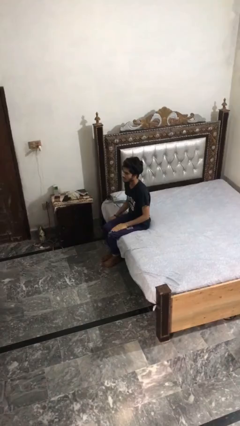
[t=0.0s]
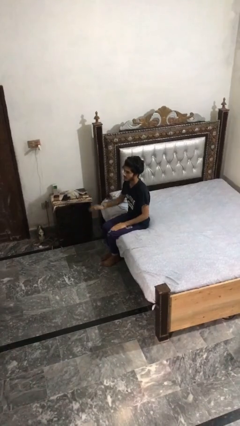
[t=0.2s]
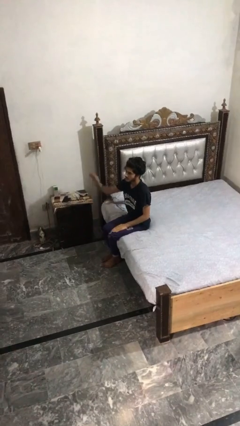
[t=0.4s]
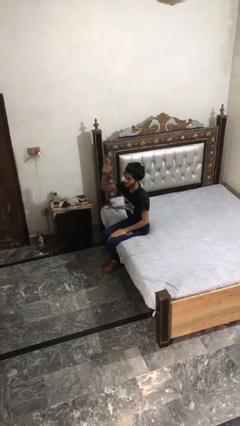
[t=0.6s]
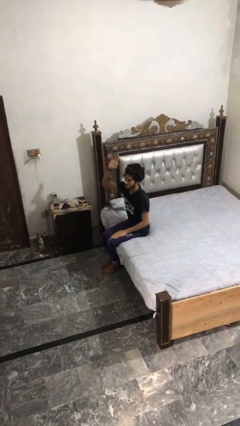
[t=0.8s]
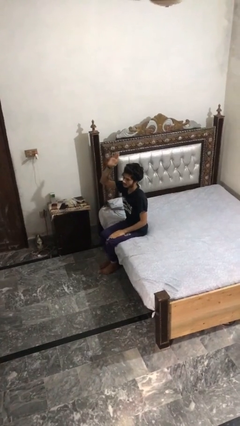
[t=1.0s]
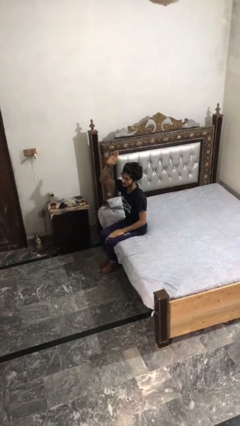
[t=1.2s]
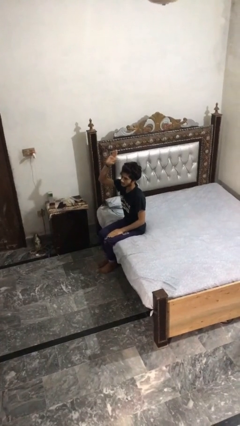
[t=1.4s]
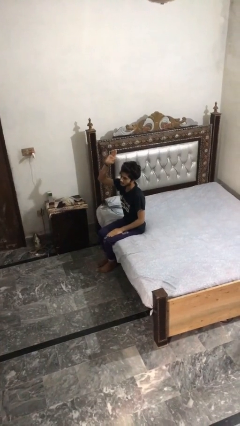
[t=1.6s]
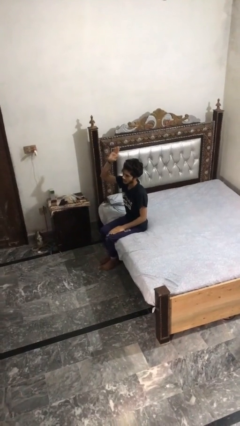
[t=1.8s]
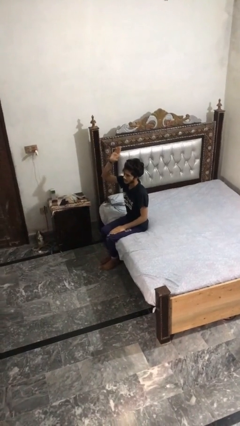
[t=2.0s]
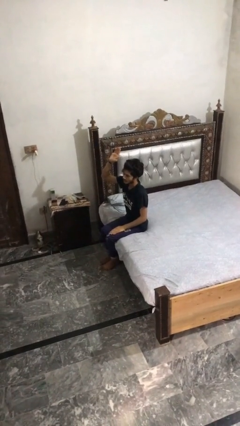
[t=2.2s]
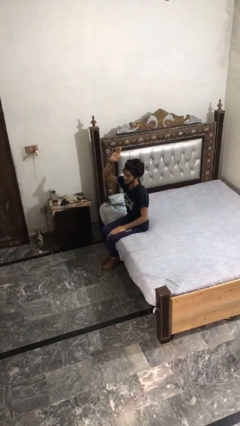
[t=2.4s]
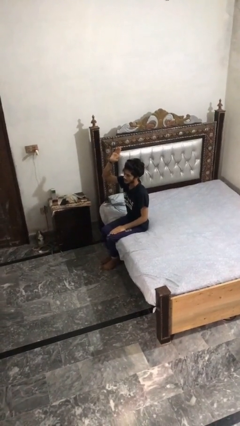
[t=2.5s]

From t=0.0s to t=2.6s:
person gestures raise hand

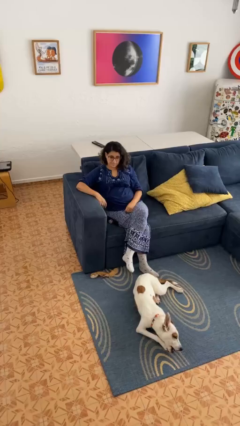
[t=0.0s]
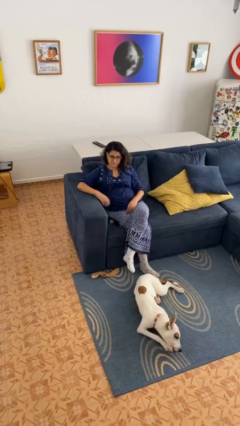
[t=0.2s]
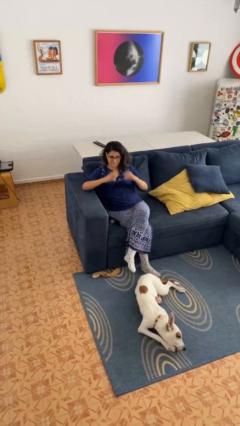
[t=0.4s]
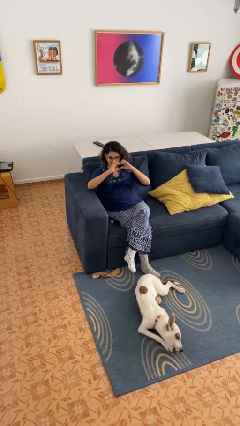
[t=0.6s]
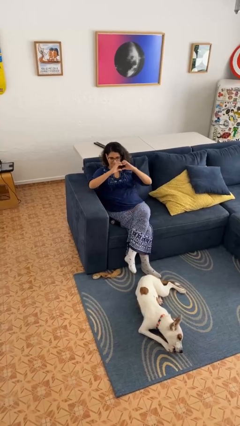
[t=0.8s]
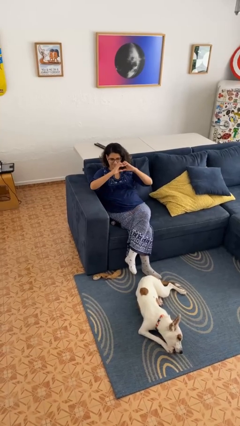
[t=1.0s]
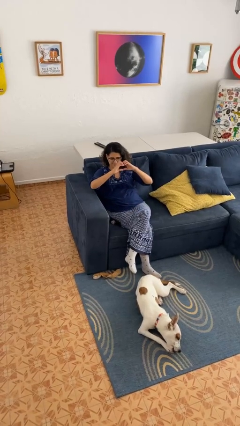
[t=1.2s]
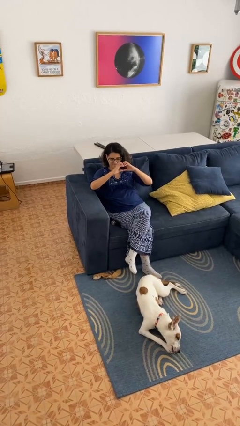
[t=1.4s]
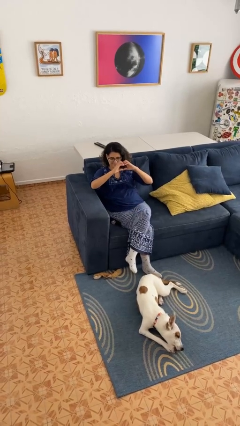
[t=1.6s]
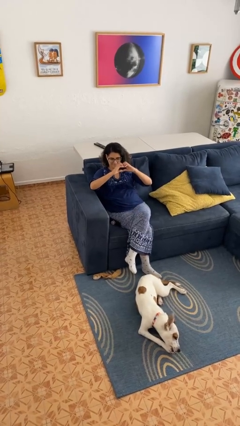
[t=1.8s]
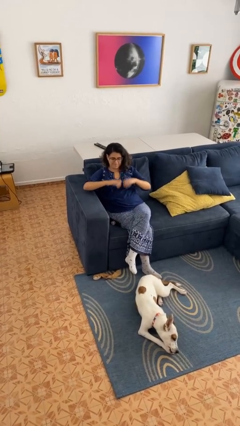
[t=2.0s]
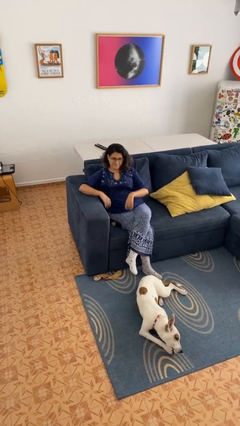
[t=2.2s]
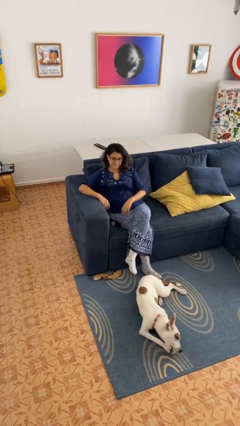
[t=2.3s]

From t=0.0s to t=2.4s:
person gestures heart

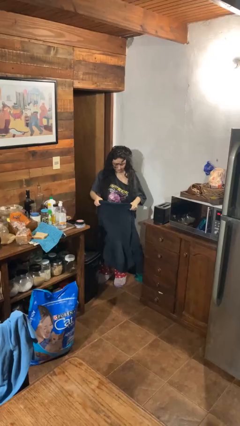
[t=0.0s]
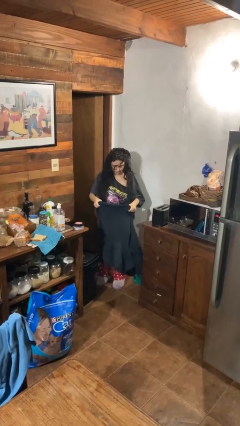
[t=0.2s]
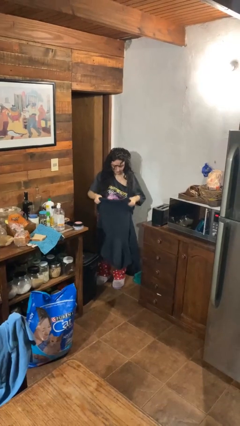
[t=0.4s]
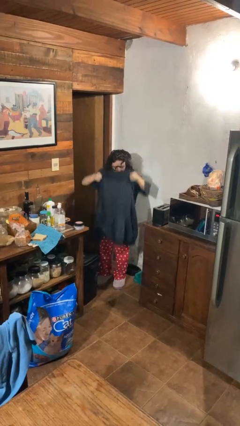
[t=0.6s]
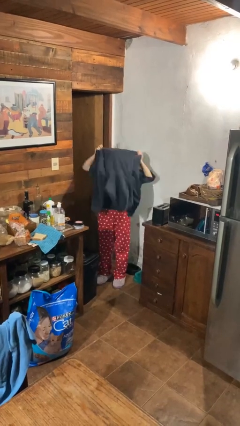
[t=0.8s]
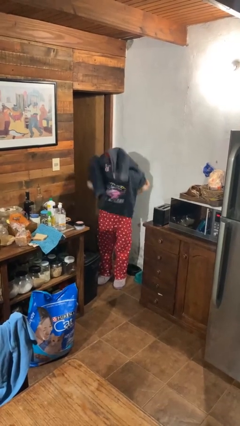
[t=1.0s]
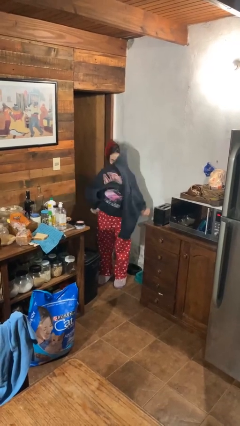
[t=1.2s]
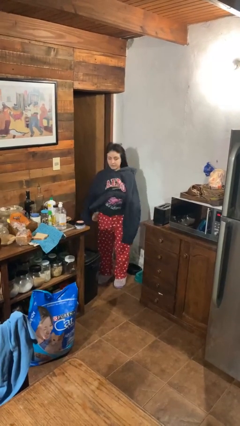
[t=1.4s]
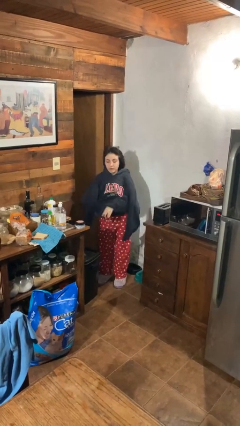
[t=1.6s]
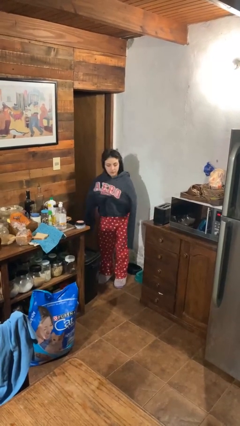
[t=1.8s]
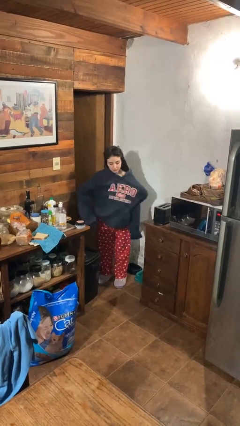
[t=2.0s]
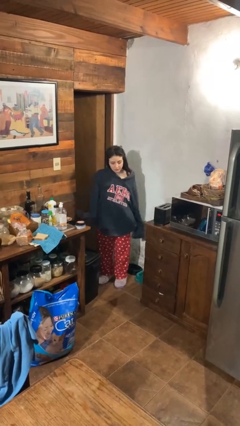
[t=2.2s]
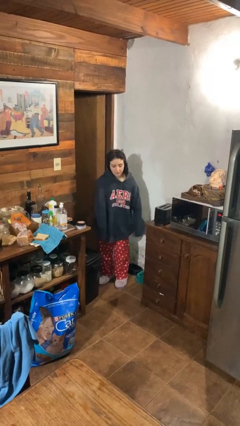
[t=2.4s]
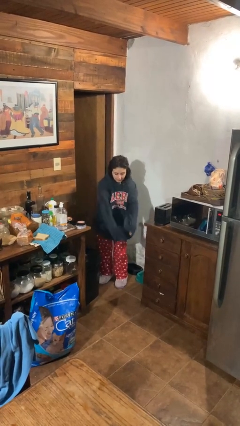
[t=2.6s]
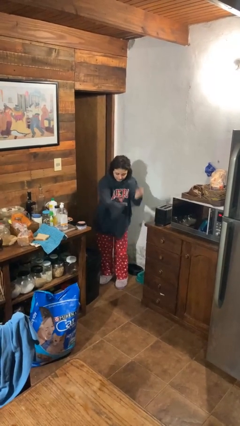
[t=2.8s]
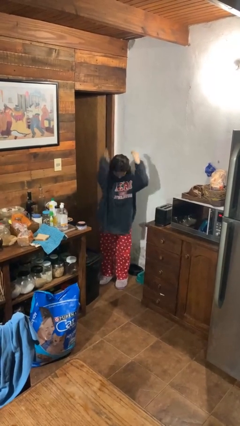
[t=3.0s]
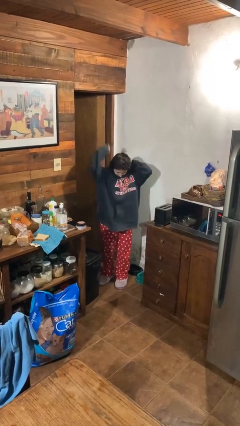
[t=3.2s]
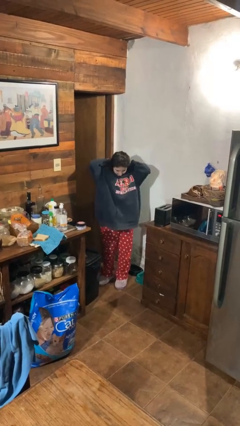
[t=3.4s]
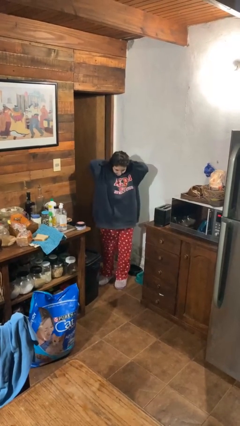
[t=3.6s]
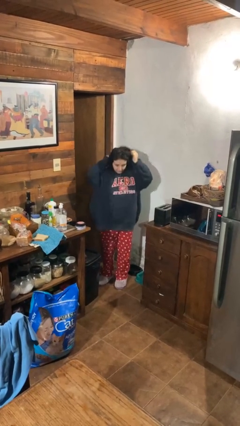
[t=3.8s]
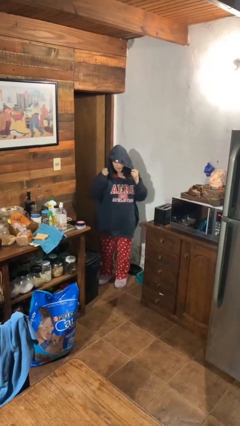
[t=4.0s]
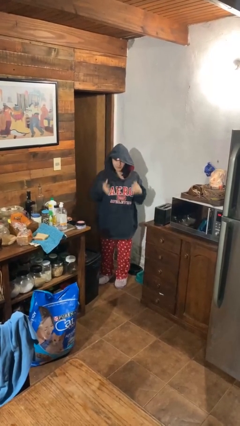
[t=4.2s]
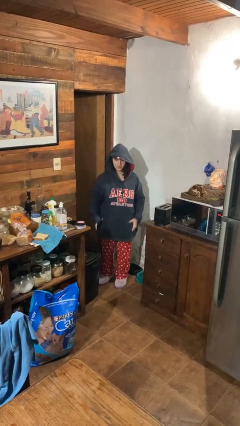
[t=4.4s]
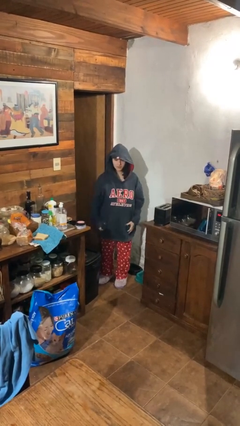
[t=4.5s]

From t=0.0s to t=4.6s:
person puts on hoodie

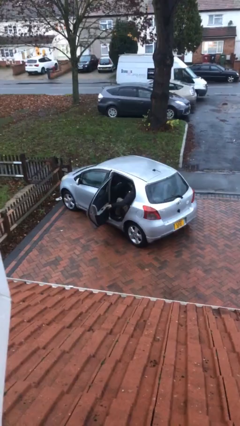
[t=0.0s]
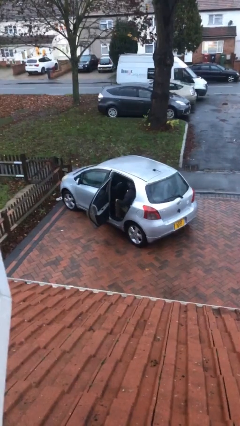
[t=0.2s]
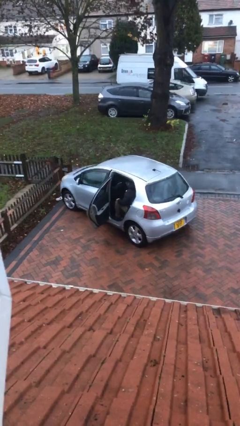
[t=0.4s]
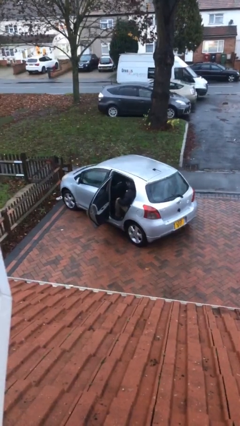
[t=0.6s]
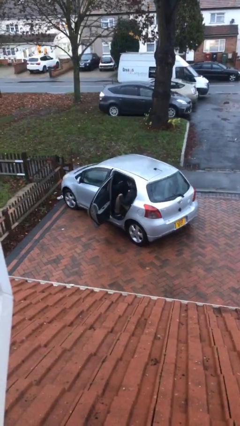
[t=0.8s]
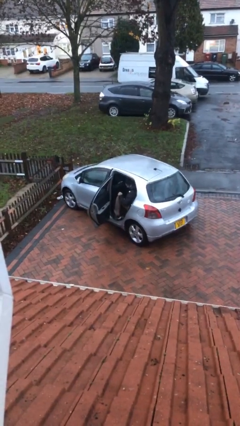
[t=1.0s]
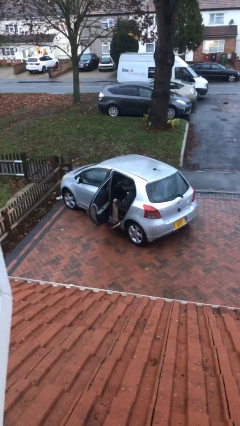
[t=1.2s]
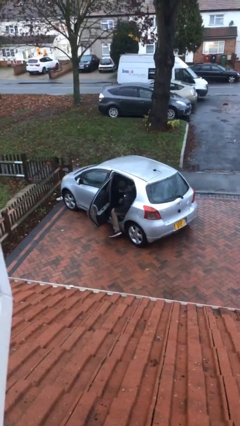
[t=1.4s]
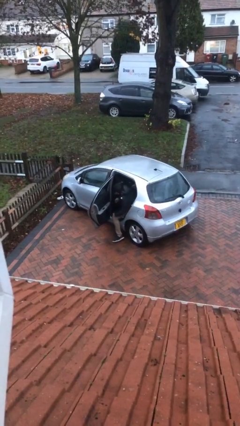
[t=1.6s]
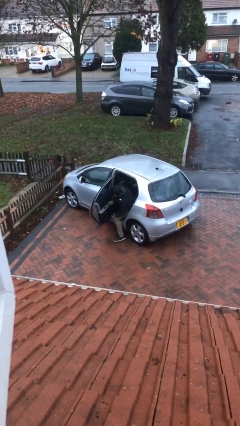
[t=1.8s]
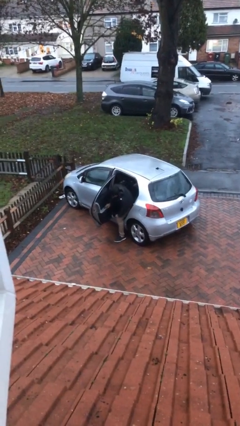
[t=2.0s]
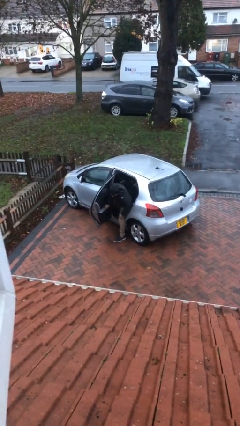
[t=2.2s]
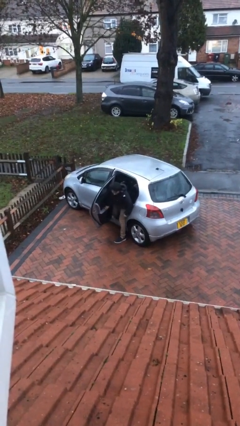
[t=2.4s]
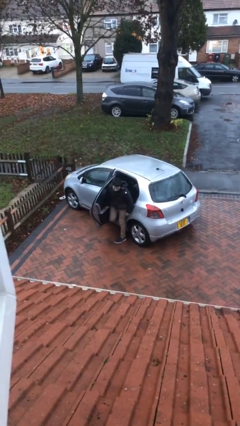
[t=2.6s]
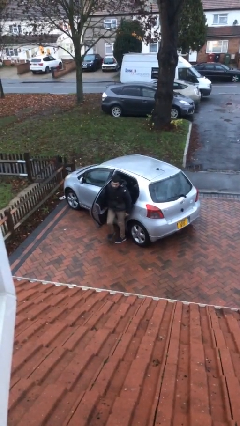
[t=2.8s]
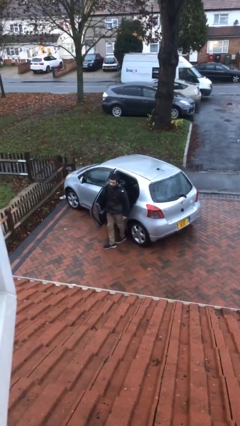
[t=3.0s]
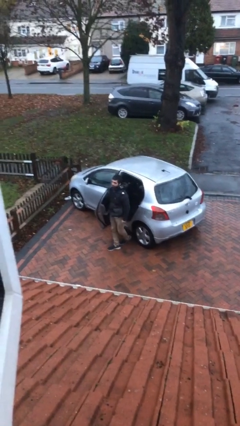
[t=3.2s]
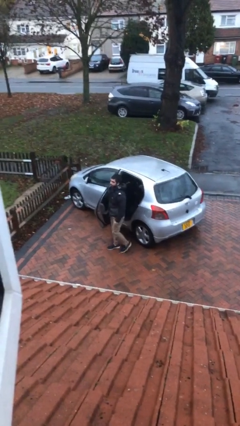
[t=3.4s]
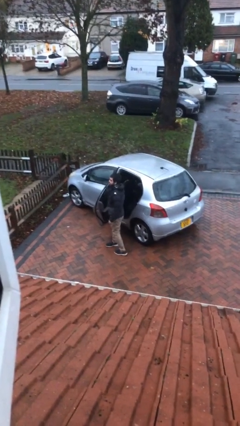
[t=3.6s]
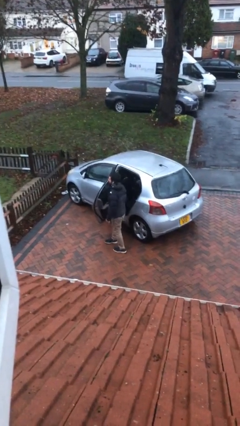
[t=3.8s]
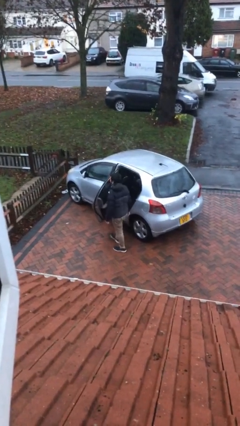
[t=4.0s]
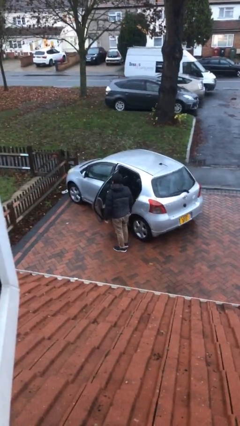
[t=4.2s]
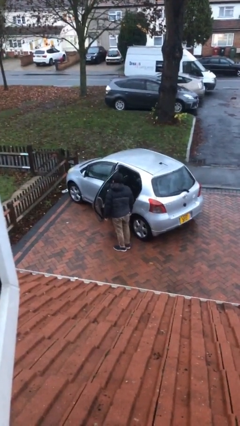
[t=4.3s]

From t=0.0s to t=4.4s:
person exits car

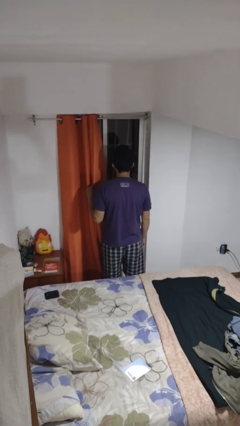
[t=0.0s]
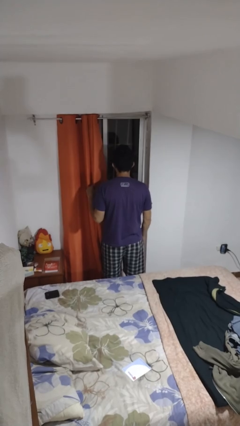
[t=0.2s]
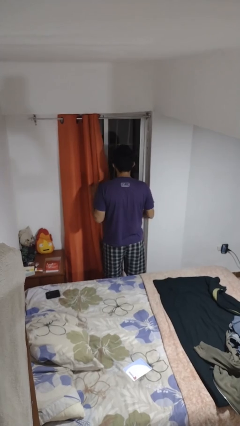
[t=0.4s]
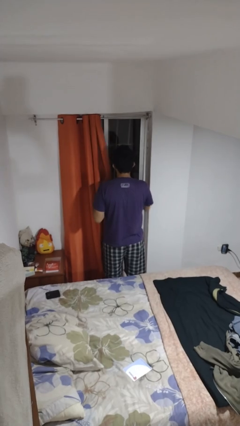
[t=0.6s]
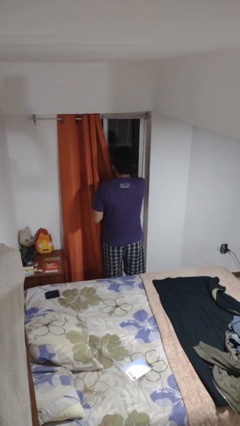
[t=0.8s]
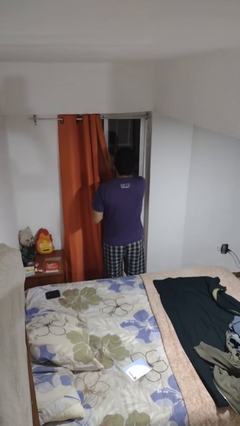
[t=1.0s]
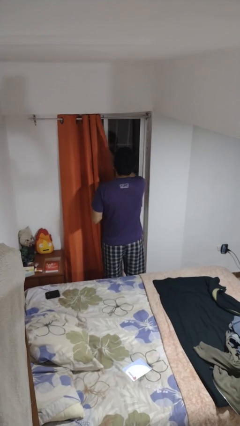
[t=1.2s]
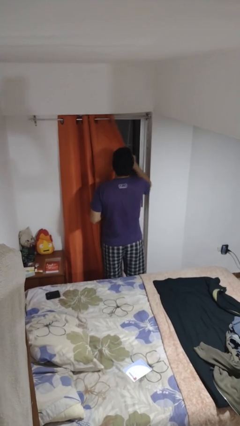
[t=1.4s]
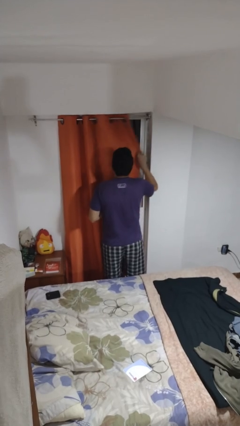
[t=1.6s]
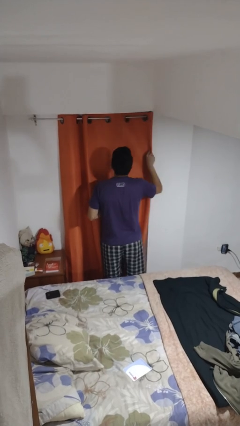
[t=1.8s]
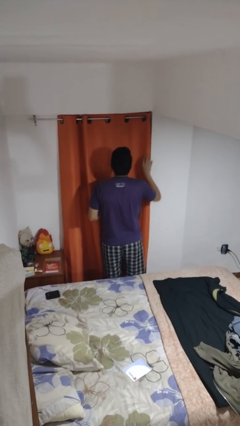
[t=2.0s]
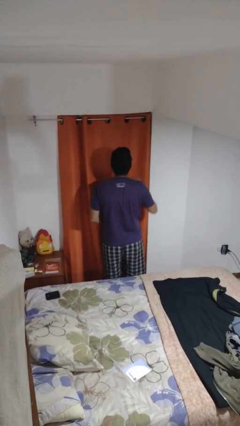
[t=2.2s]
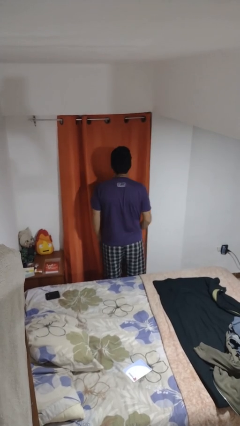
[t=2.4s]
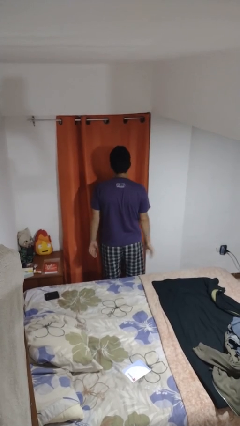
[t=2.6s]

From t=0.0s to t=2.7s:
person closes curtains

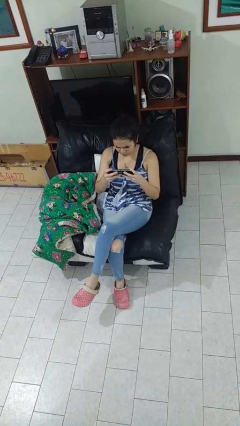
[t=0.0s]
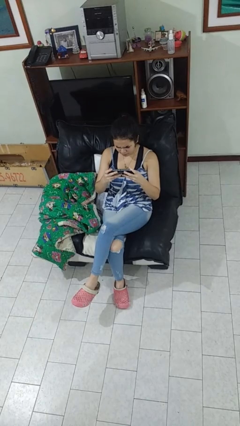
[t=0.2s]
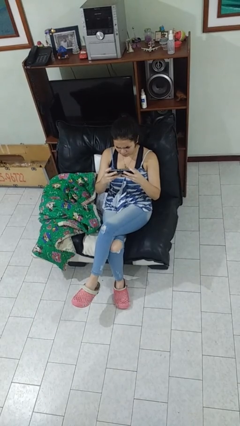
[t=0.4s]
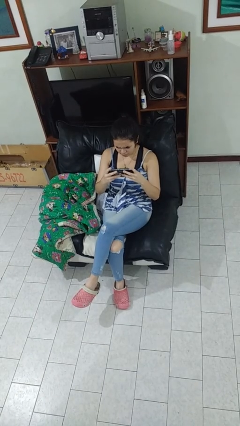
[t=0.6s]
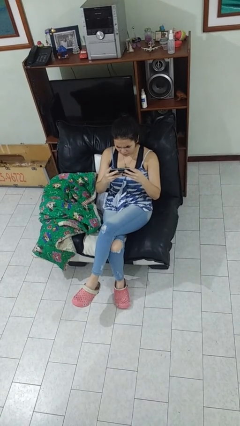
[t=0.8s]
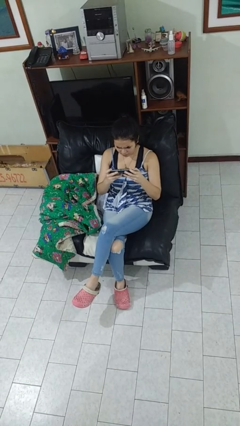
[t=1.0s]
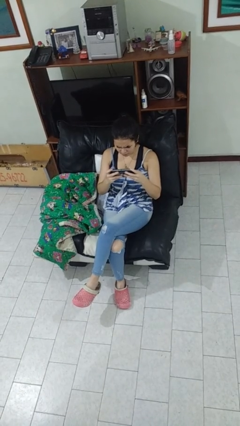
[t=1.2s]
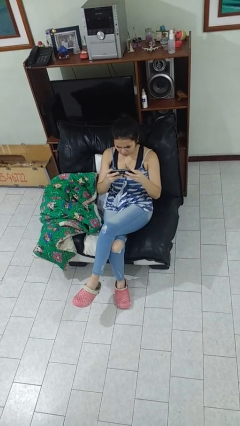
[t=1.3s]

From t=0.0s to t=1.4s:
person interacts with handheld game
